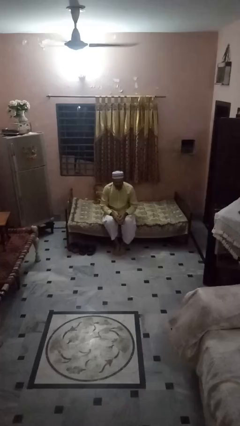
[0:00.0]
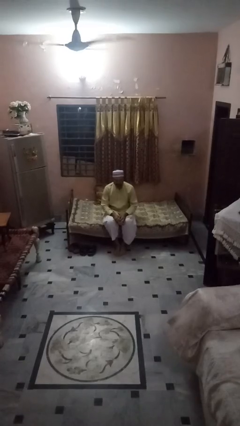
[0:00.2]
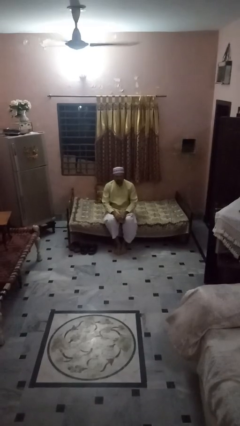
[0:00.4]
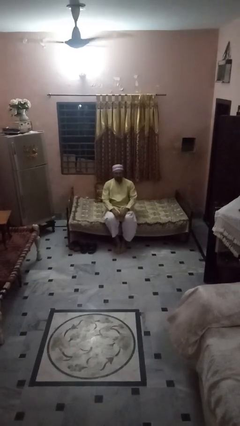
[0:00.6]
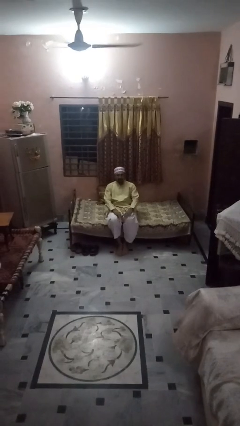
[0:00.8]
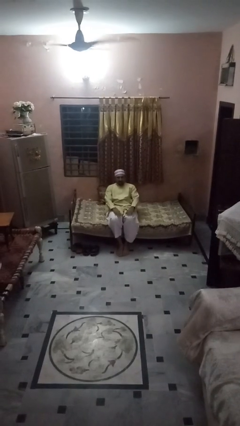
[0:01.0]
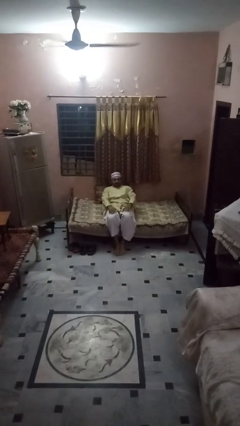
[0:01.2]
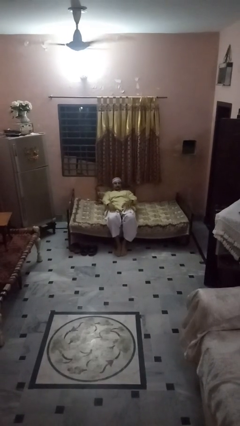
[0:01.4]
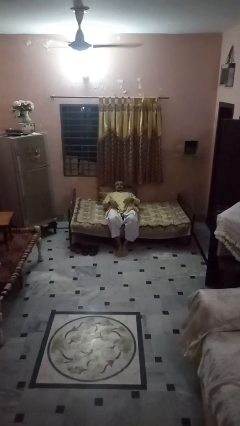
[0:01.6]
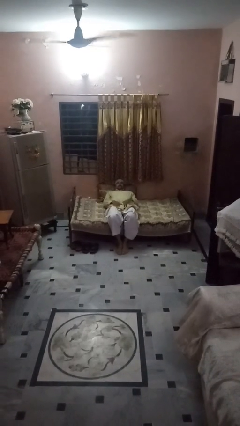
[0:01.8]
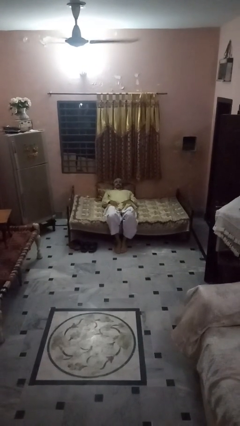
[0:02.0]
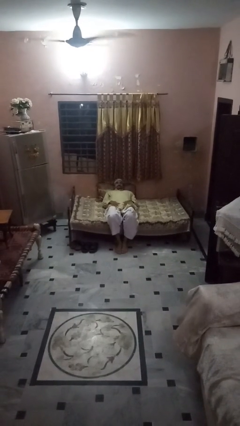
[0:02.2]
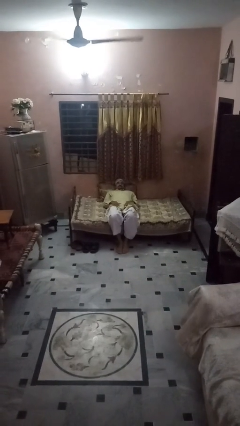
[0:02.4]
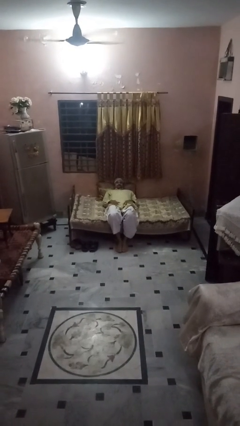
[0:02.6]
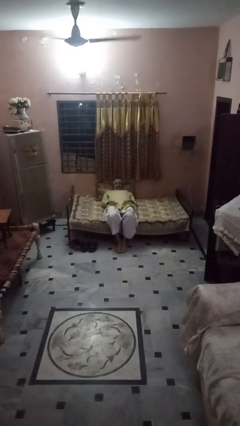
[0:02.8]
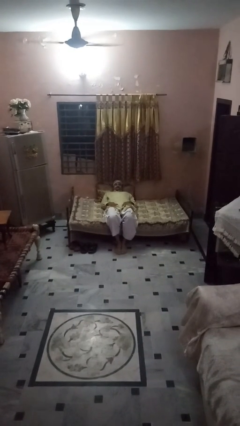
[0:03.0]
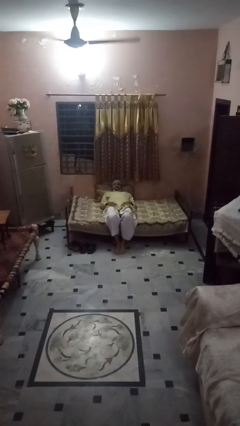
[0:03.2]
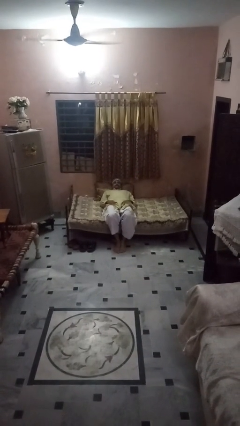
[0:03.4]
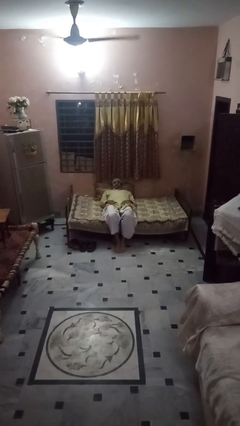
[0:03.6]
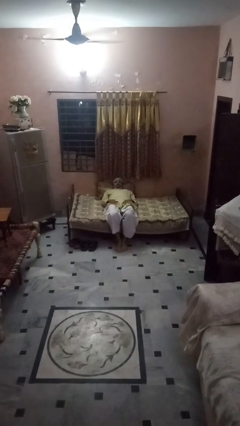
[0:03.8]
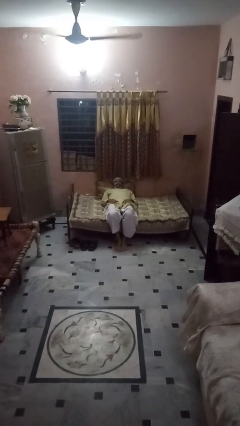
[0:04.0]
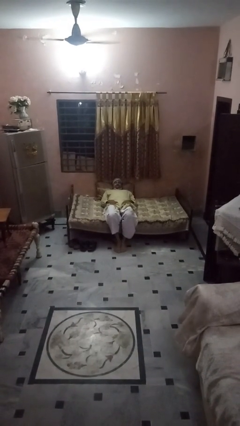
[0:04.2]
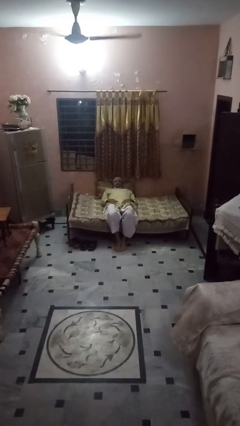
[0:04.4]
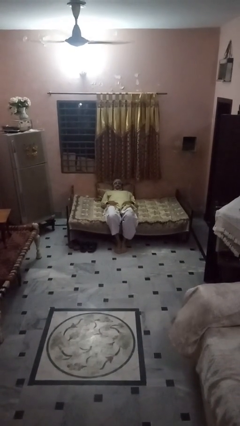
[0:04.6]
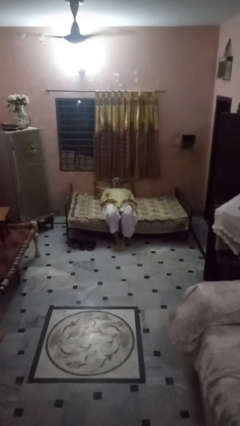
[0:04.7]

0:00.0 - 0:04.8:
person lies down on bed

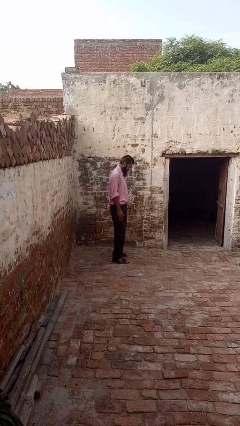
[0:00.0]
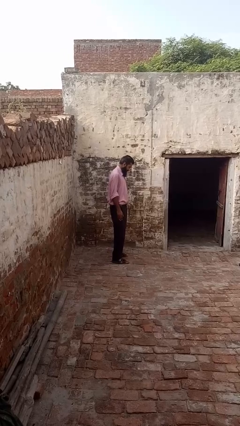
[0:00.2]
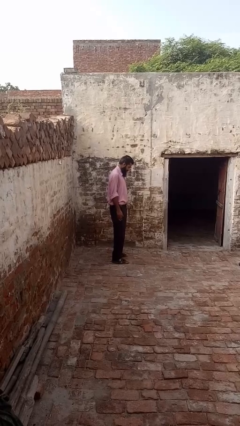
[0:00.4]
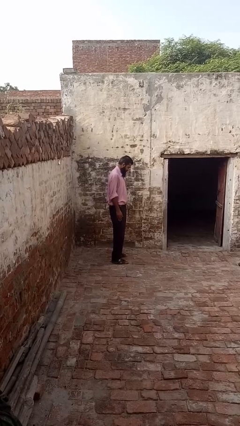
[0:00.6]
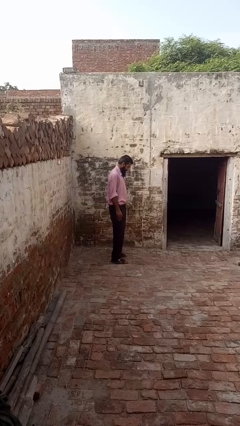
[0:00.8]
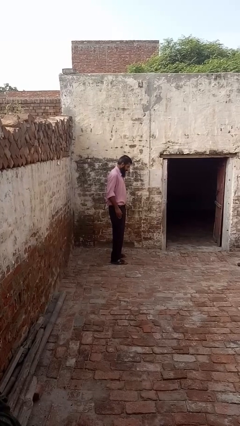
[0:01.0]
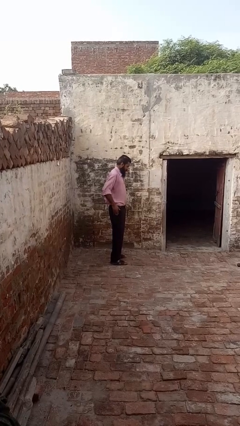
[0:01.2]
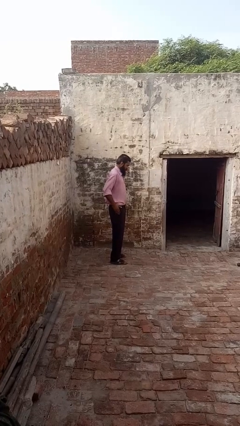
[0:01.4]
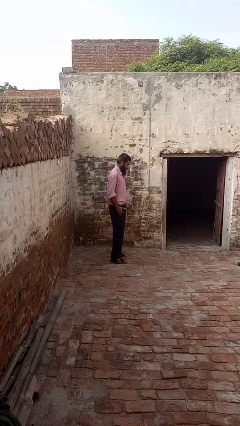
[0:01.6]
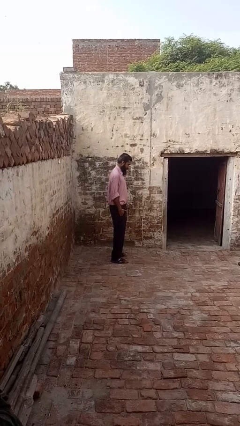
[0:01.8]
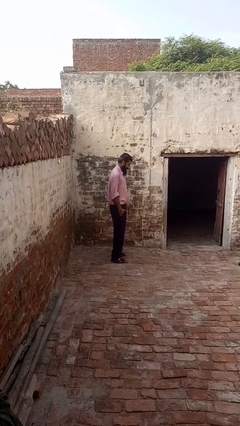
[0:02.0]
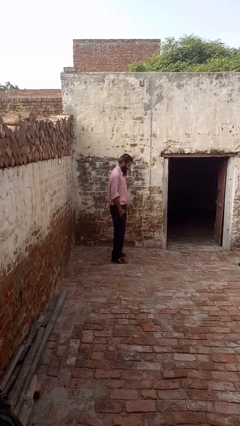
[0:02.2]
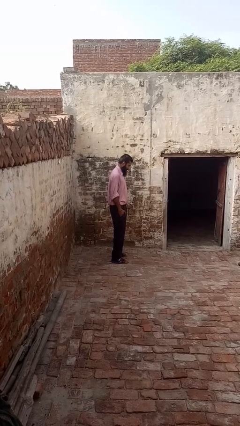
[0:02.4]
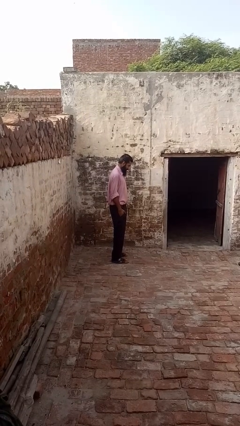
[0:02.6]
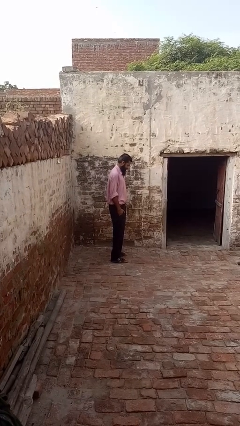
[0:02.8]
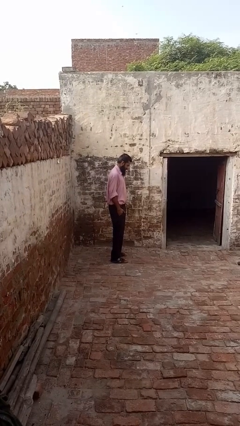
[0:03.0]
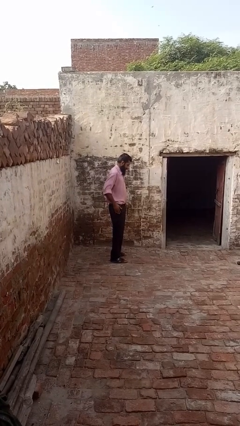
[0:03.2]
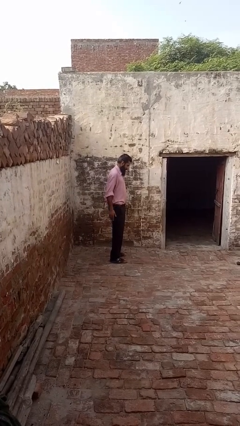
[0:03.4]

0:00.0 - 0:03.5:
person puts hands in back pockets

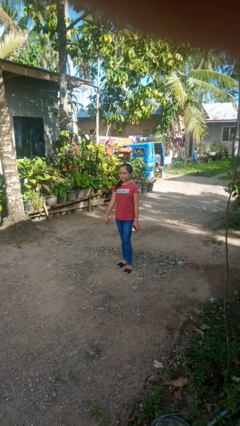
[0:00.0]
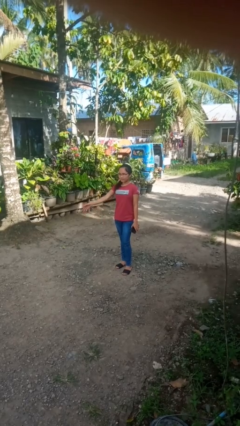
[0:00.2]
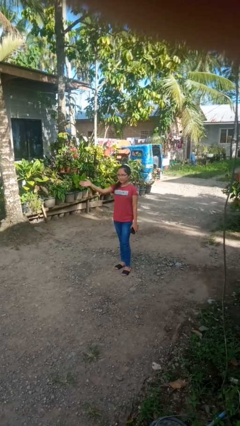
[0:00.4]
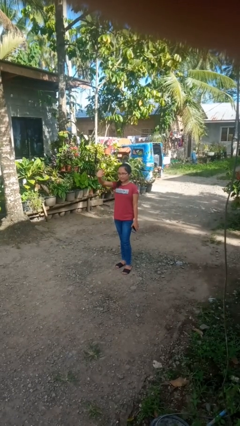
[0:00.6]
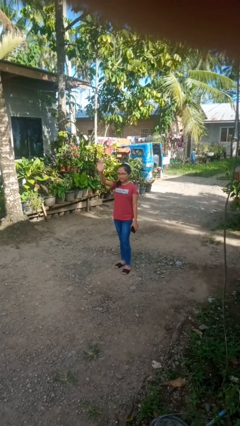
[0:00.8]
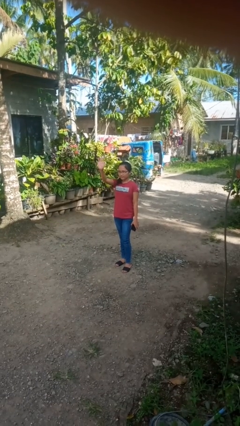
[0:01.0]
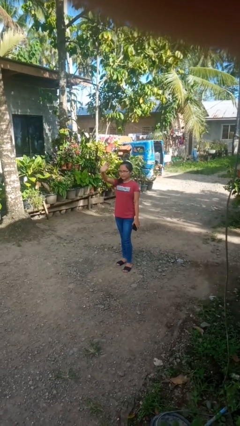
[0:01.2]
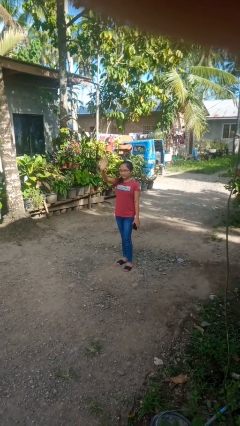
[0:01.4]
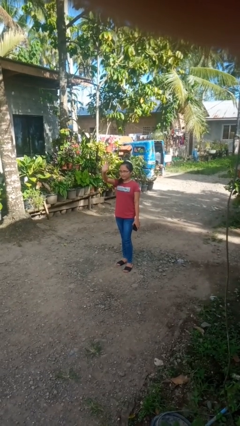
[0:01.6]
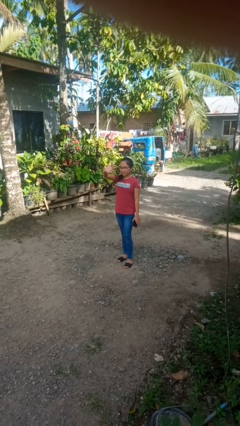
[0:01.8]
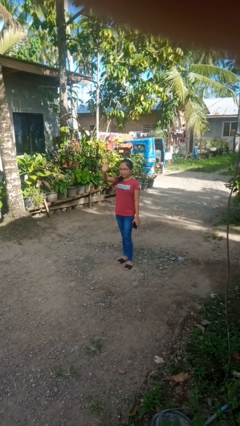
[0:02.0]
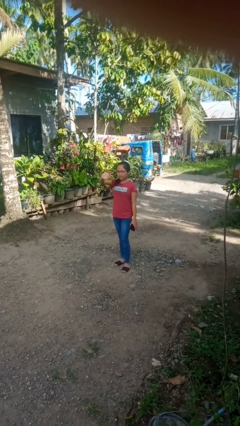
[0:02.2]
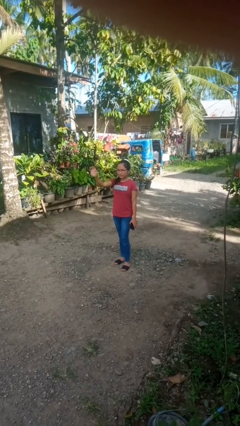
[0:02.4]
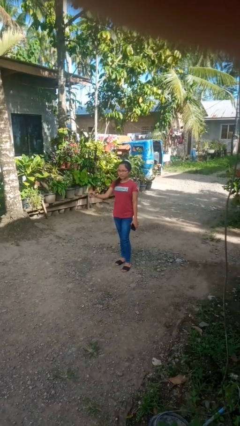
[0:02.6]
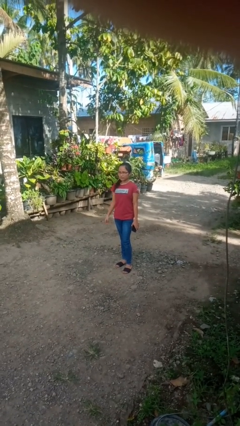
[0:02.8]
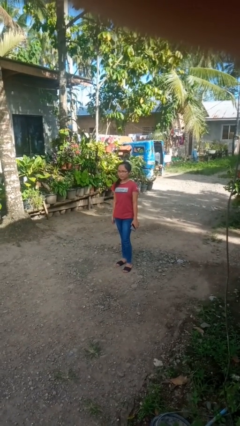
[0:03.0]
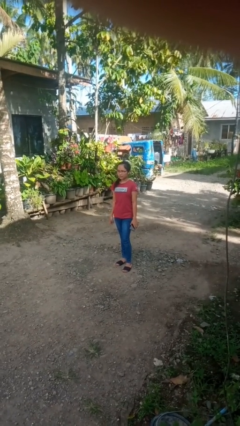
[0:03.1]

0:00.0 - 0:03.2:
person waves at person

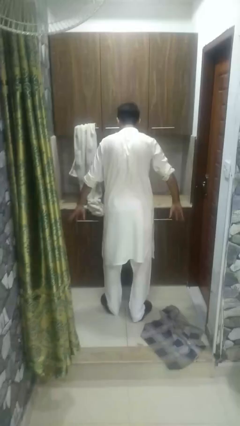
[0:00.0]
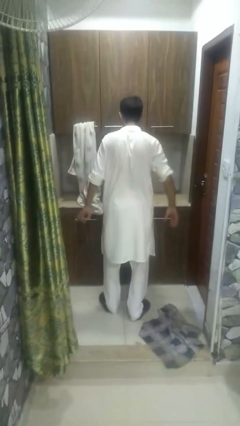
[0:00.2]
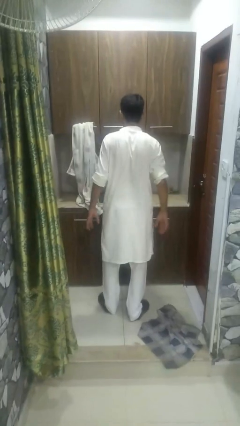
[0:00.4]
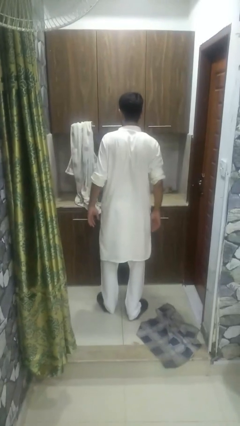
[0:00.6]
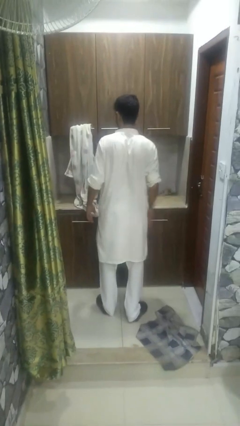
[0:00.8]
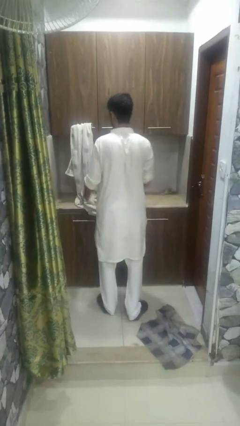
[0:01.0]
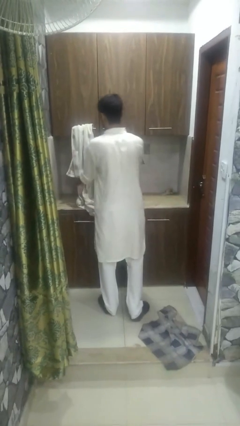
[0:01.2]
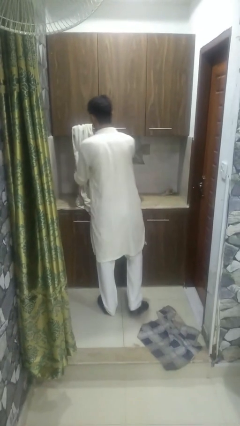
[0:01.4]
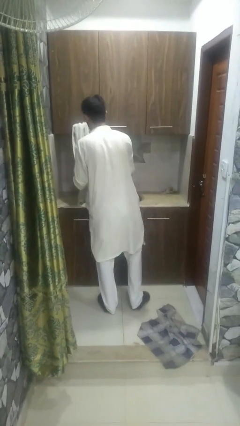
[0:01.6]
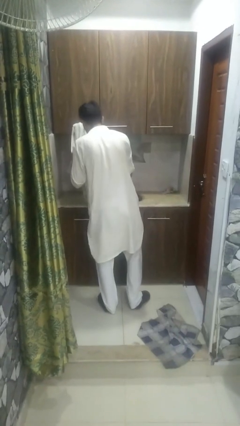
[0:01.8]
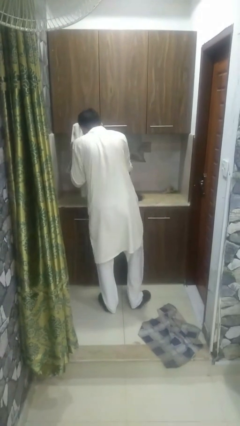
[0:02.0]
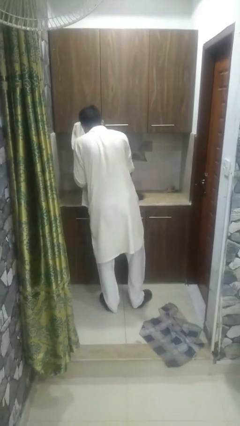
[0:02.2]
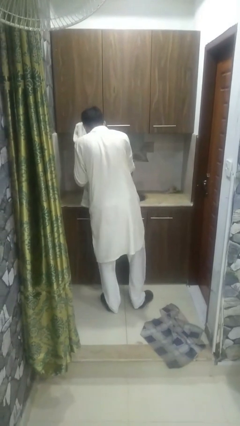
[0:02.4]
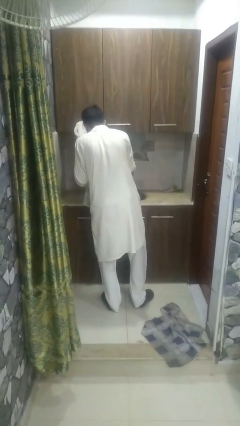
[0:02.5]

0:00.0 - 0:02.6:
person dries face with towel

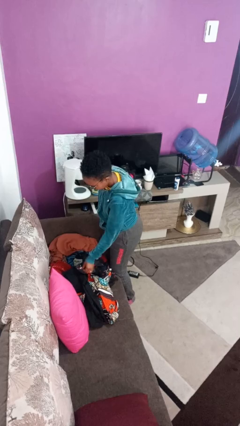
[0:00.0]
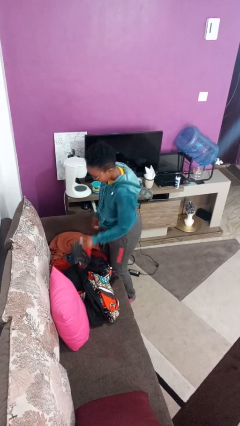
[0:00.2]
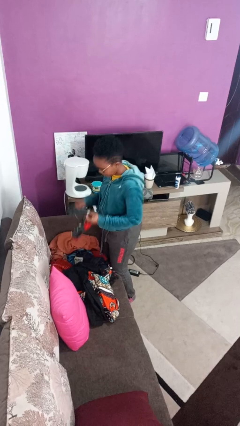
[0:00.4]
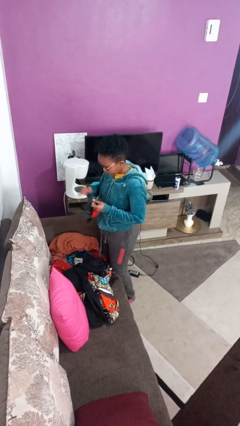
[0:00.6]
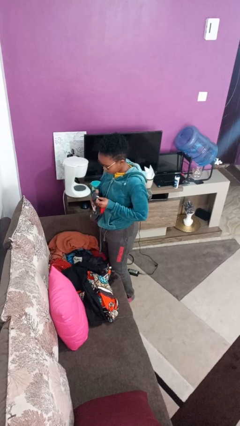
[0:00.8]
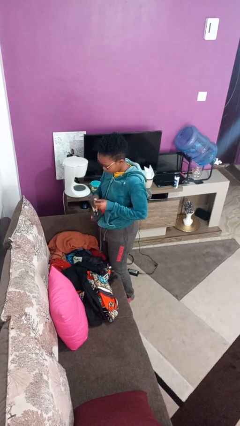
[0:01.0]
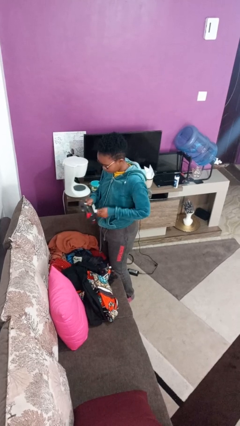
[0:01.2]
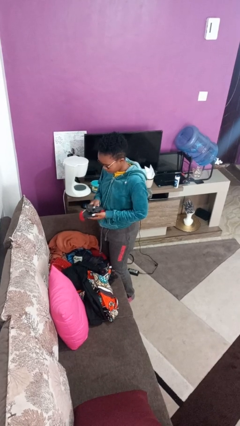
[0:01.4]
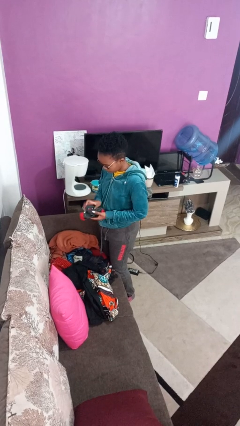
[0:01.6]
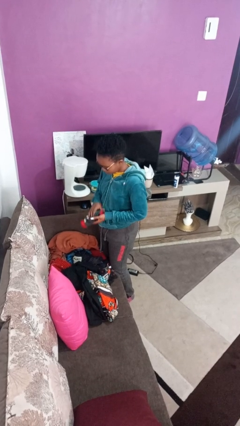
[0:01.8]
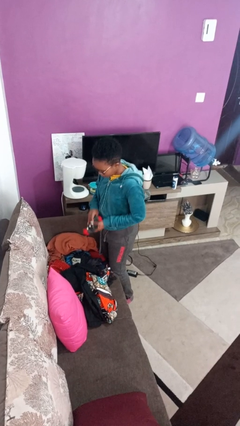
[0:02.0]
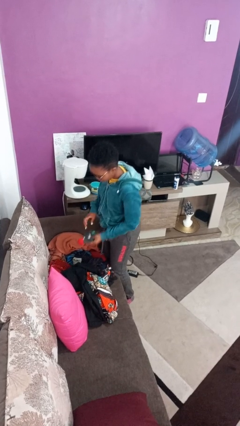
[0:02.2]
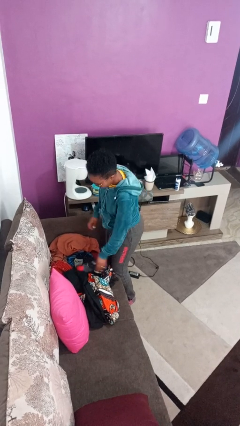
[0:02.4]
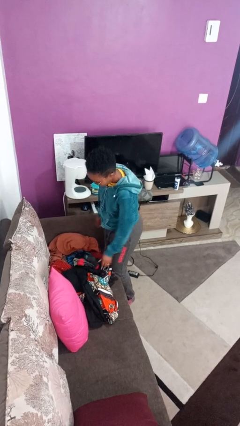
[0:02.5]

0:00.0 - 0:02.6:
person folds socks

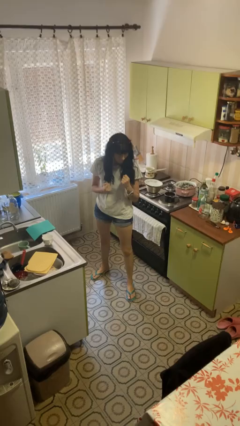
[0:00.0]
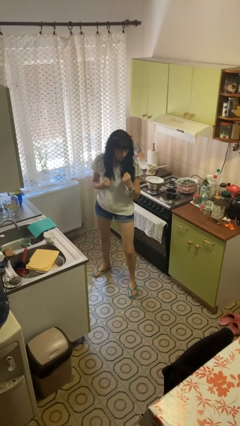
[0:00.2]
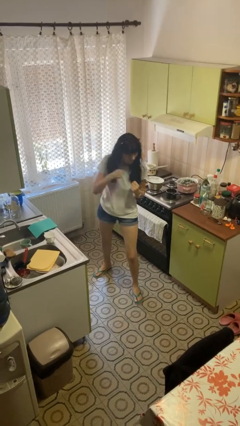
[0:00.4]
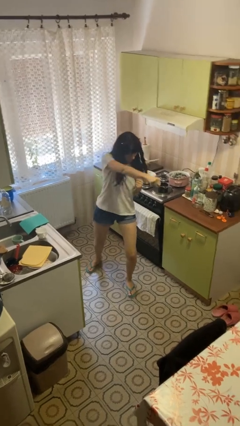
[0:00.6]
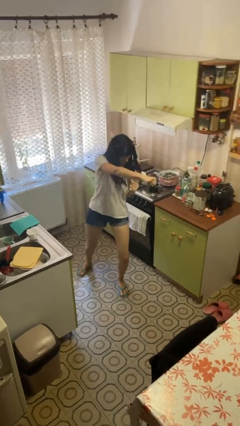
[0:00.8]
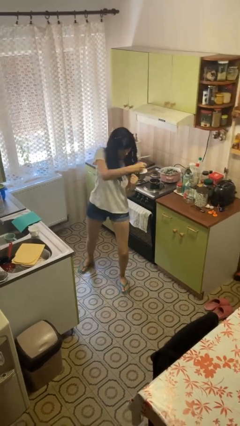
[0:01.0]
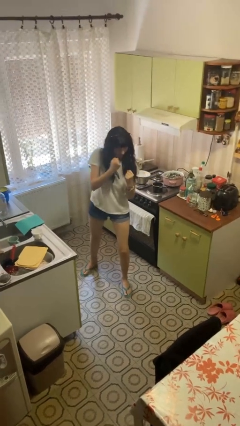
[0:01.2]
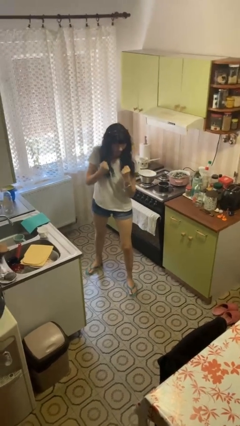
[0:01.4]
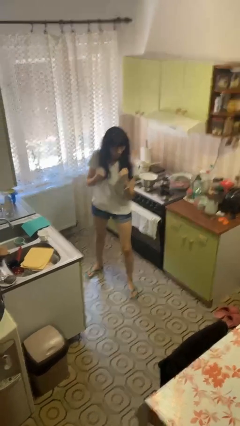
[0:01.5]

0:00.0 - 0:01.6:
person punches
